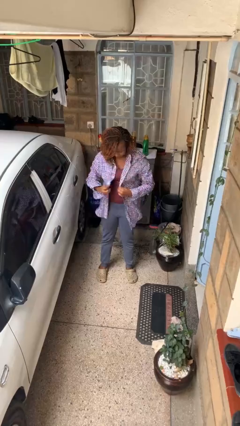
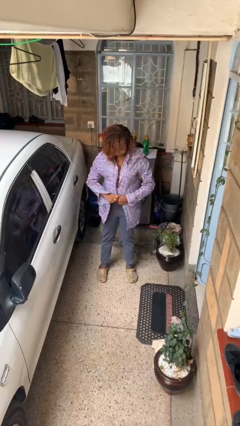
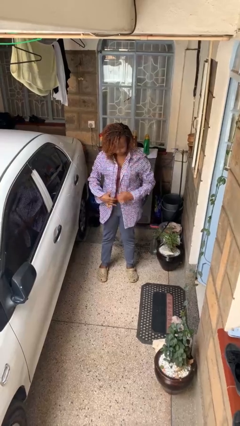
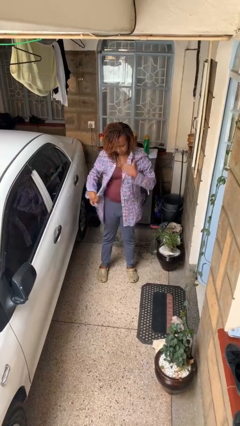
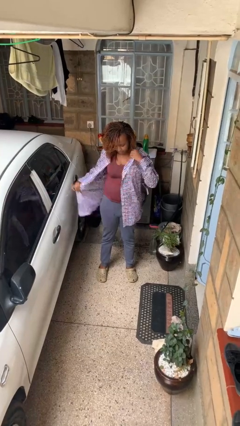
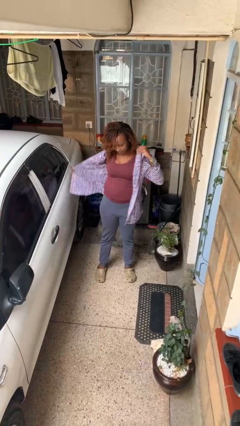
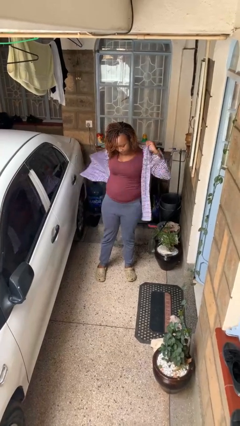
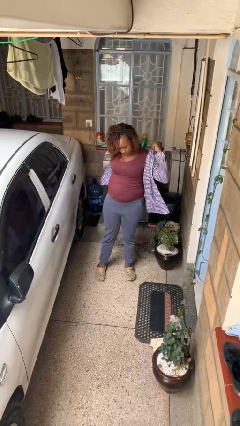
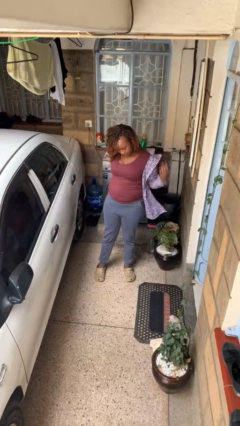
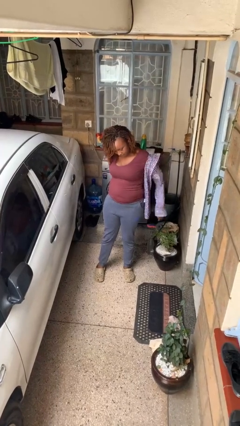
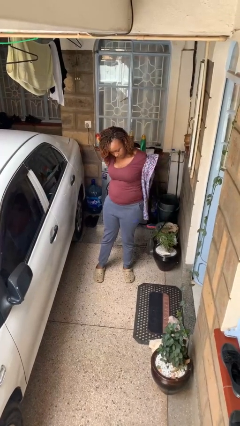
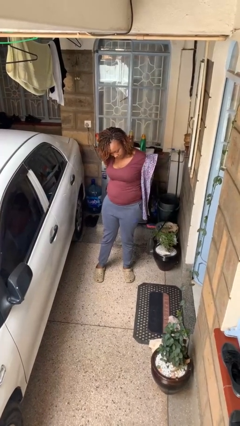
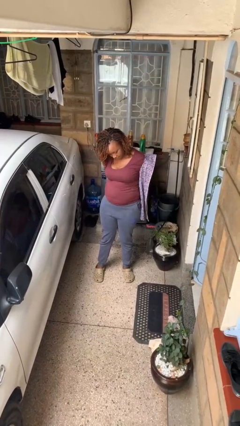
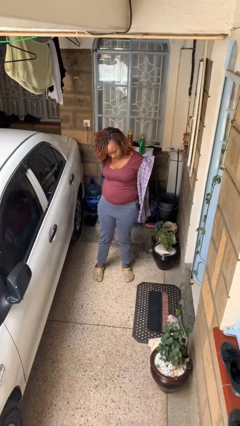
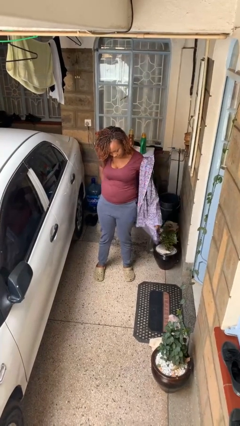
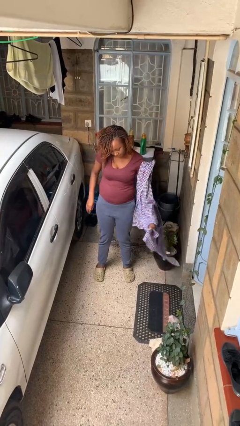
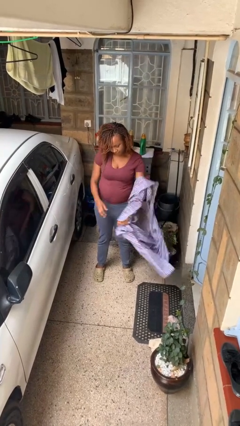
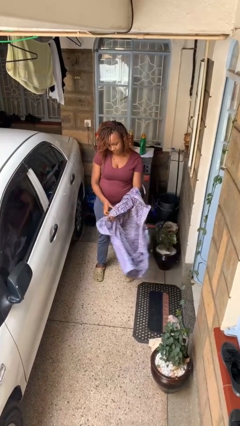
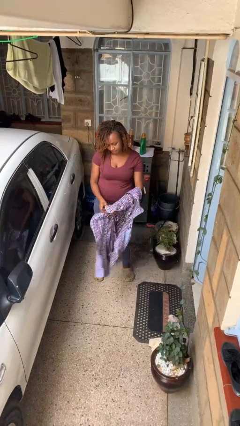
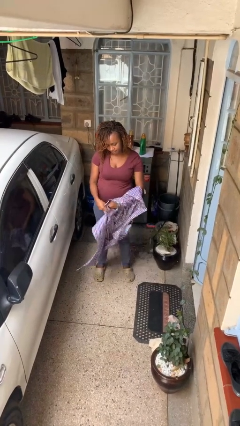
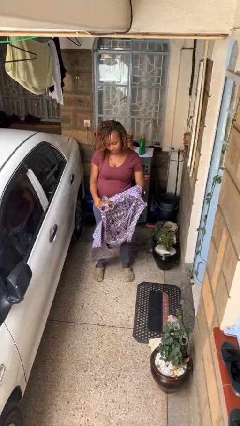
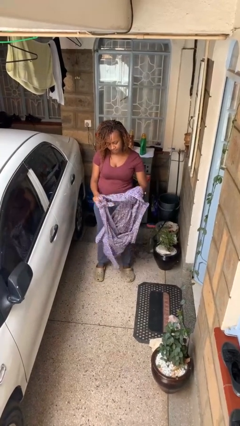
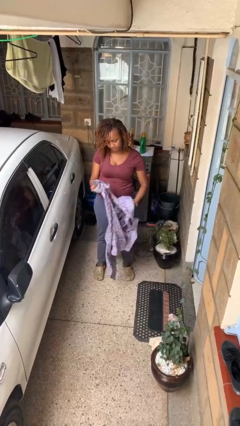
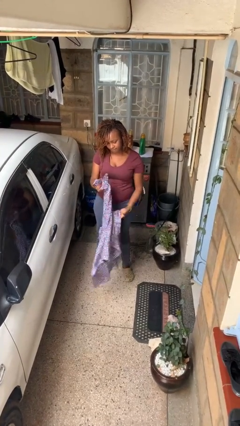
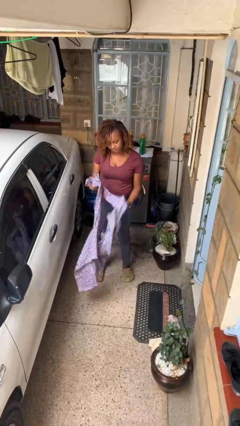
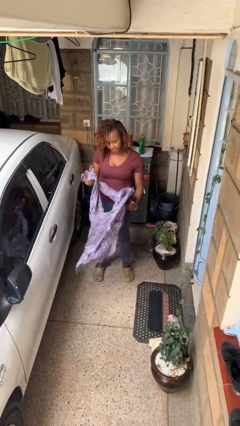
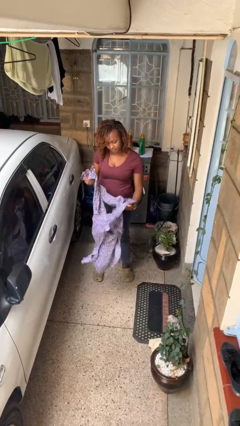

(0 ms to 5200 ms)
person takes off shirt

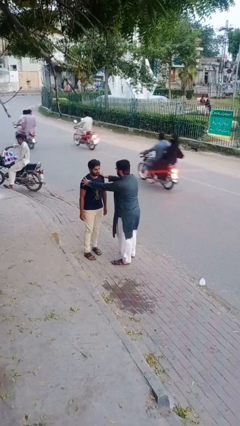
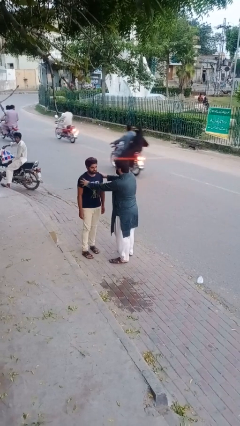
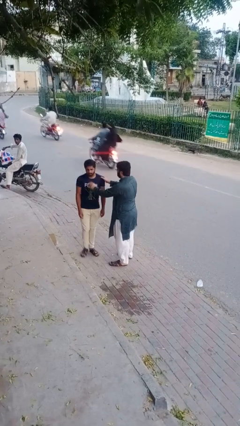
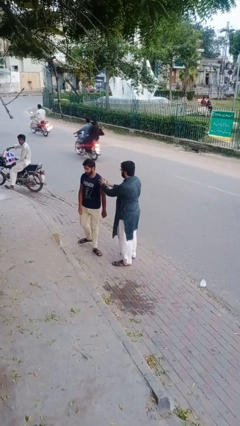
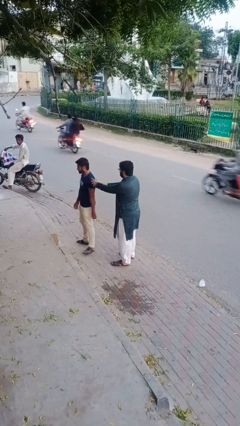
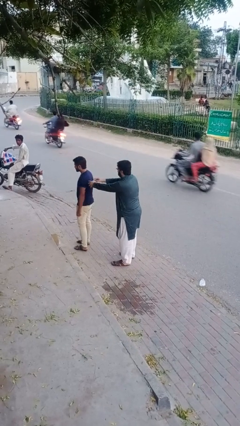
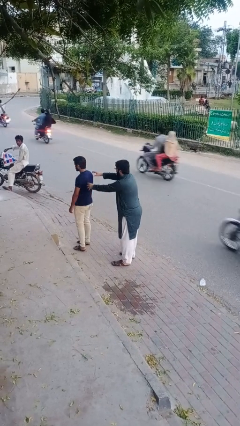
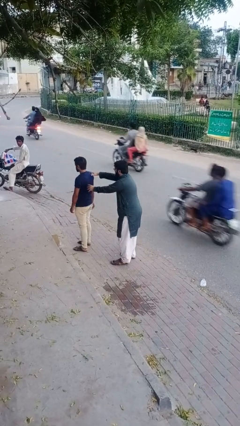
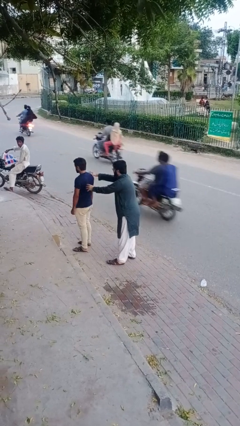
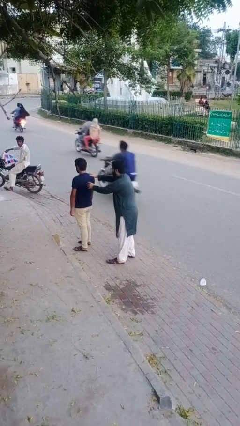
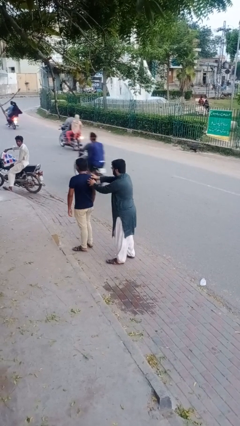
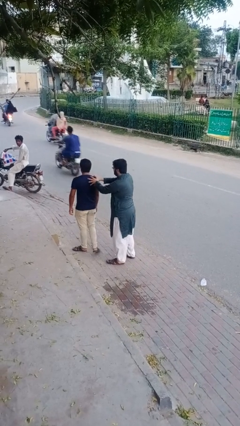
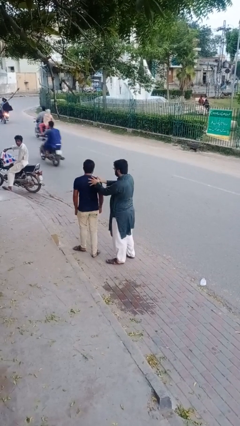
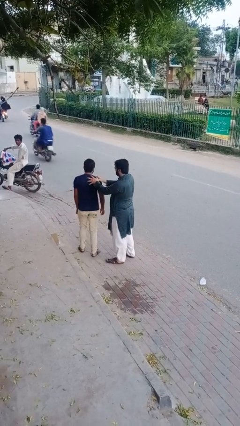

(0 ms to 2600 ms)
person grabs person by shoulder

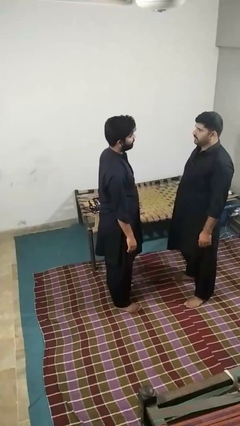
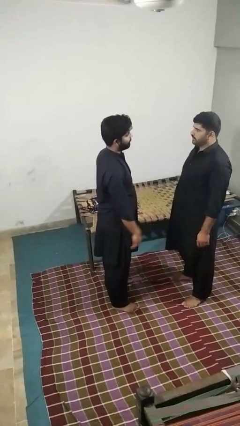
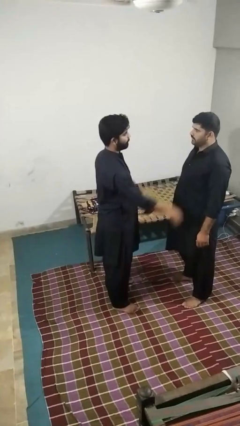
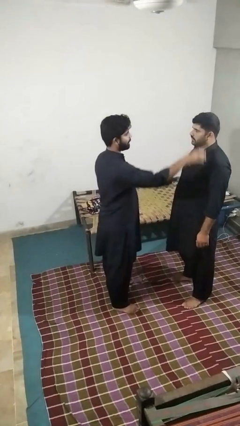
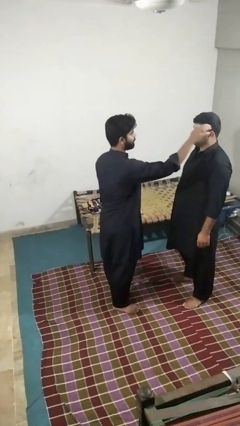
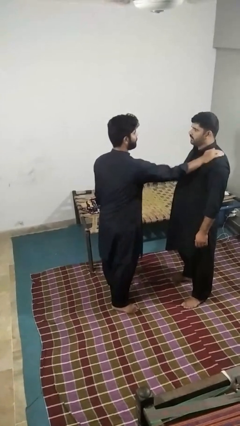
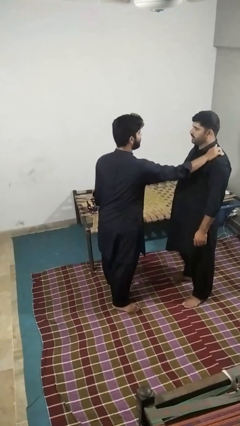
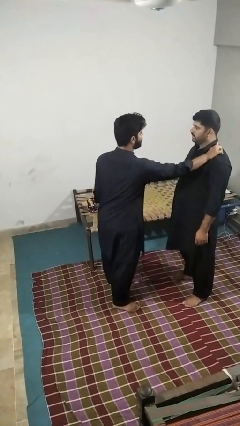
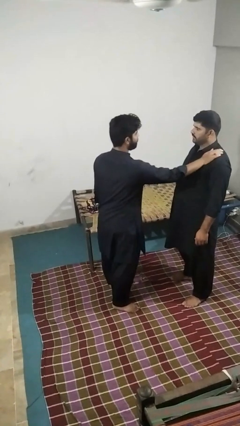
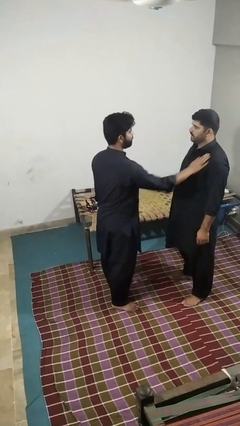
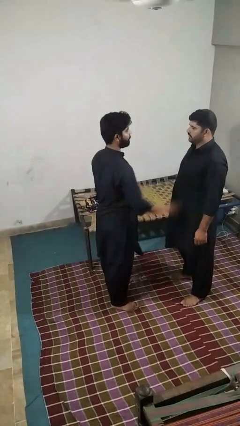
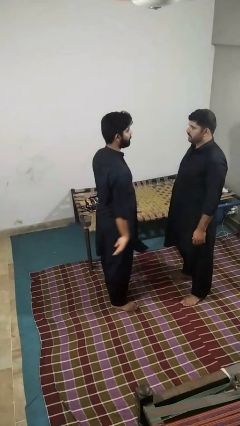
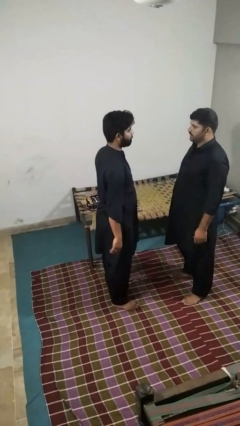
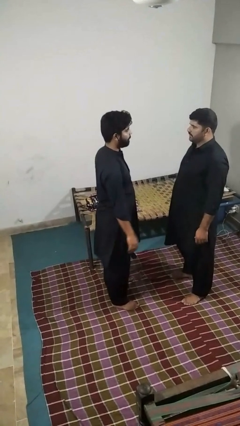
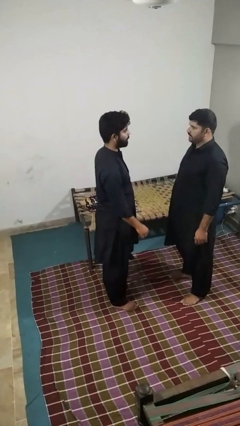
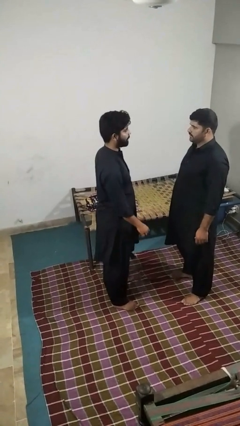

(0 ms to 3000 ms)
person pounds shoulders of person

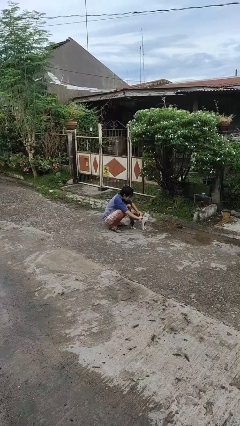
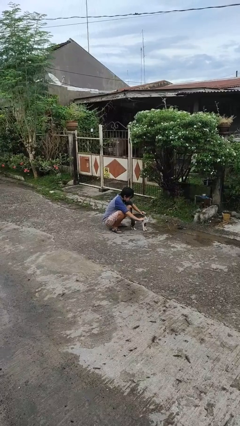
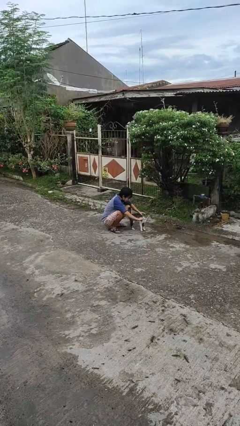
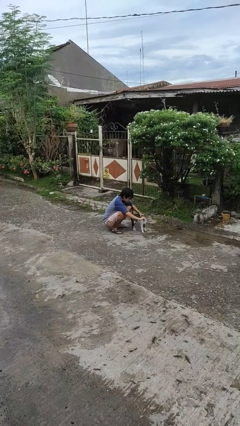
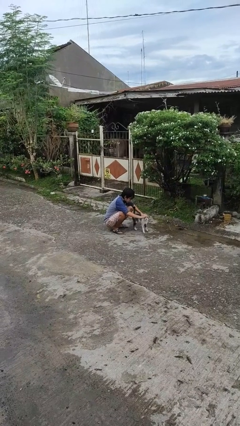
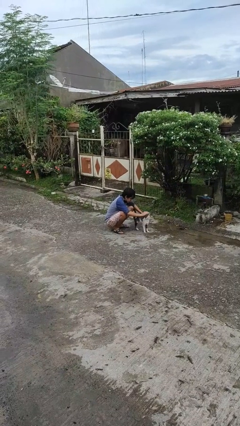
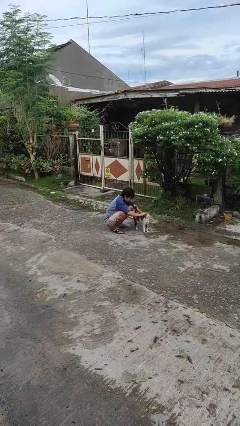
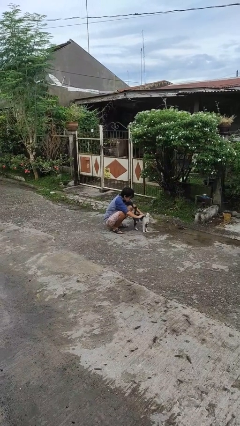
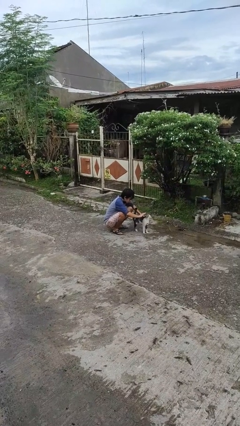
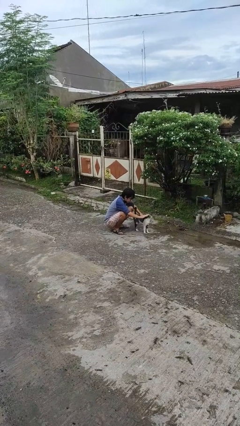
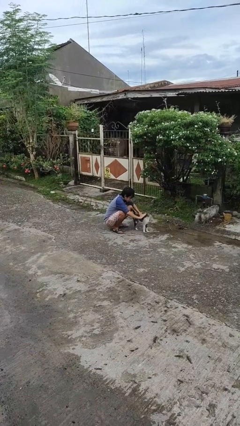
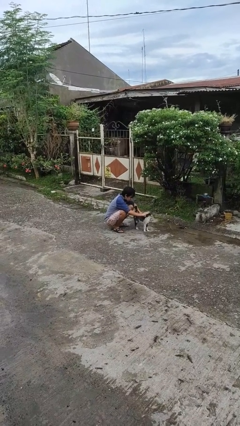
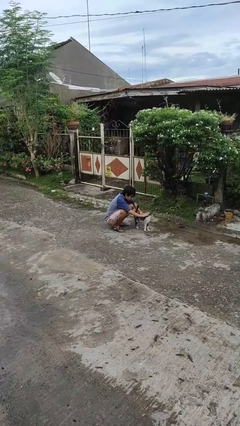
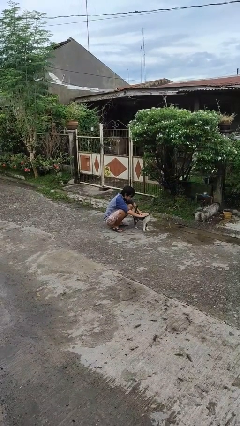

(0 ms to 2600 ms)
person pets cat

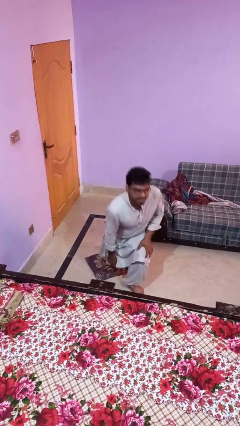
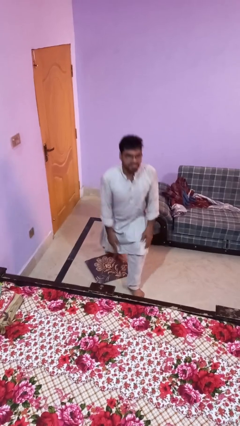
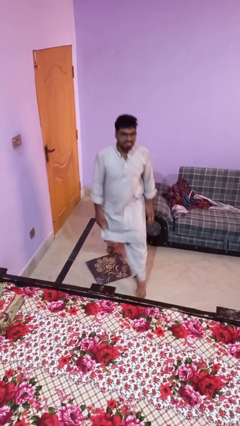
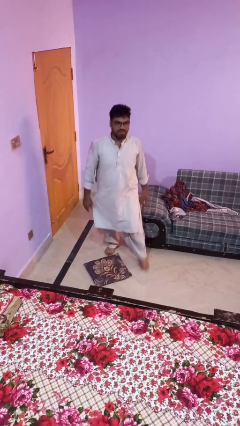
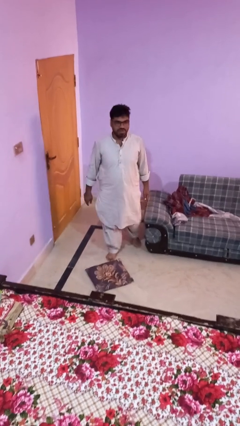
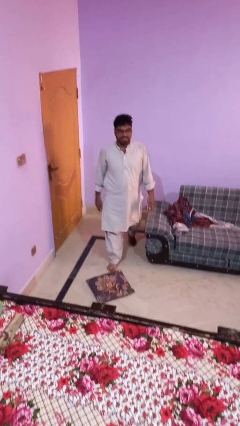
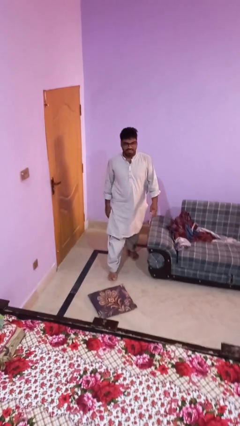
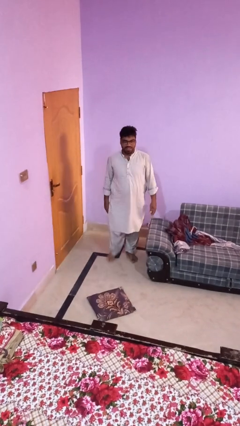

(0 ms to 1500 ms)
person stands up from floor

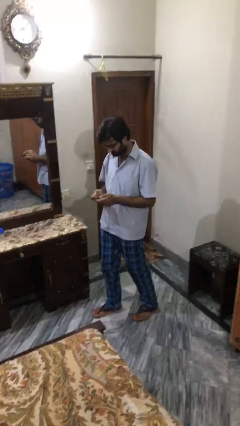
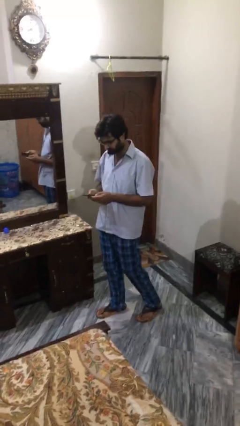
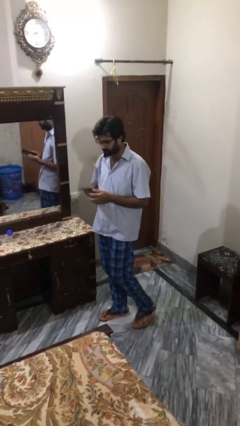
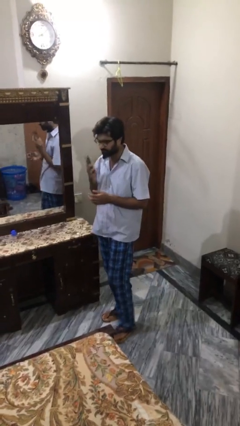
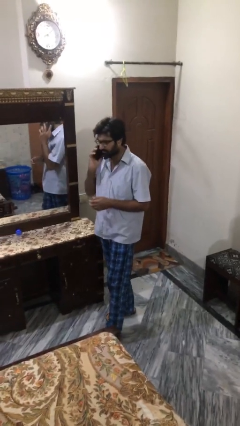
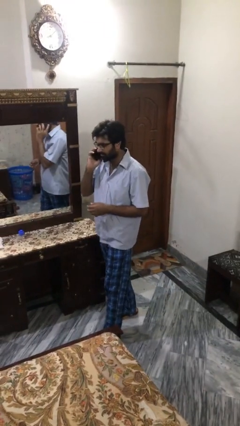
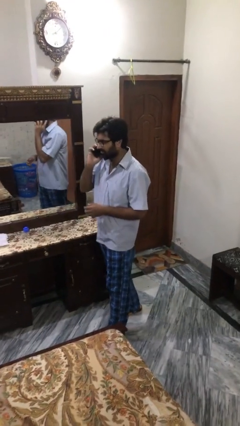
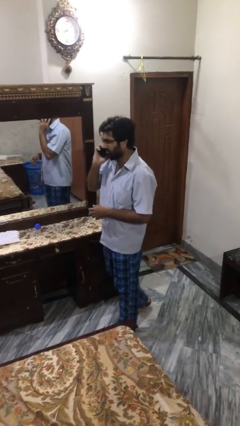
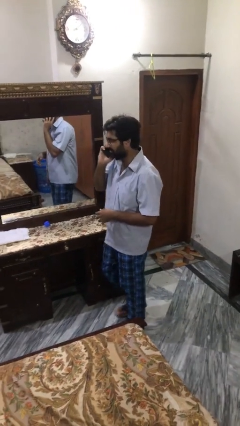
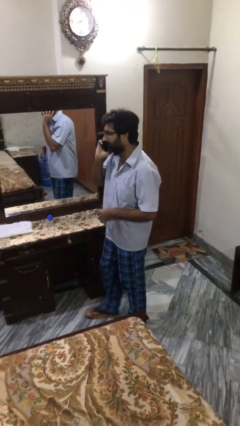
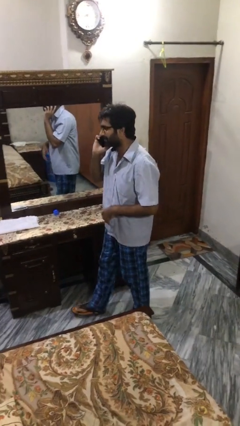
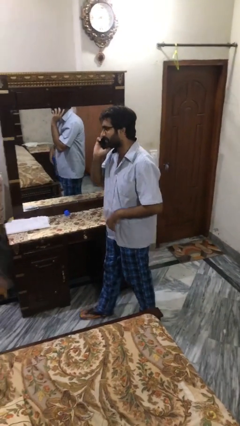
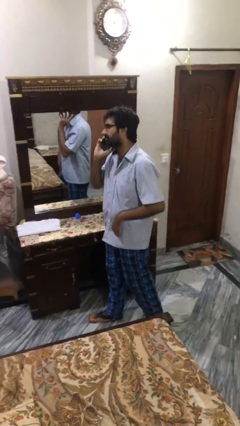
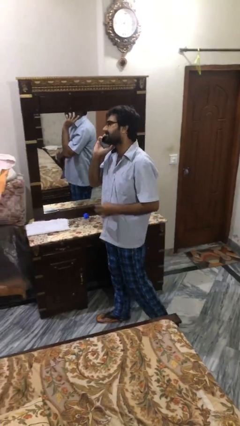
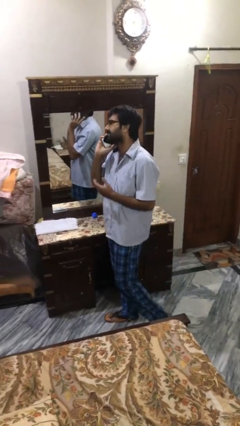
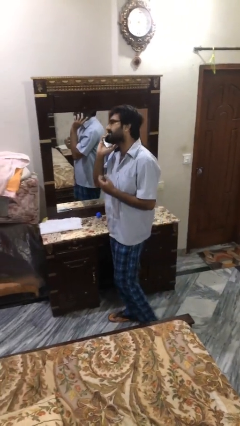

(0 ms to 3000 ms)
person talks on phone
